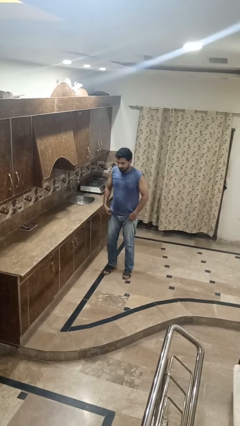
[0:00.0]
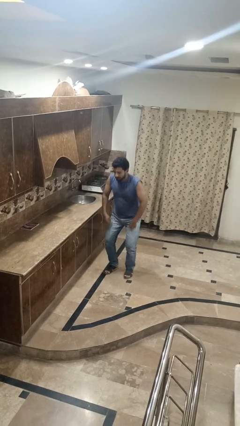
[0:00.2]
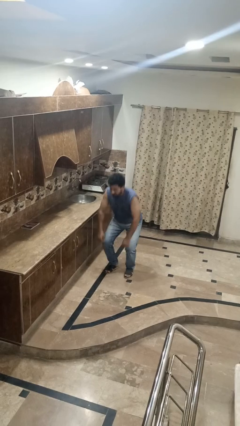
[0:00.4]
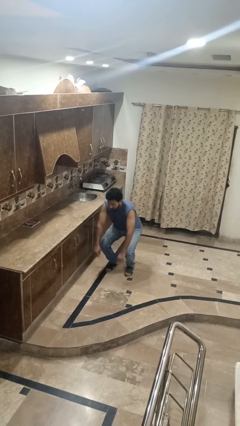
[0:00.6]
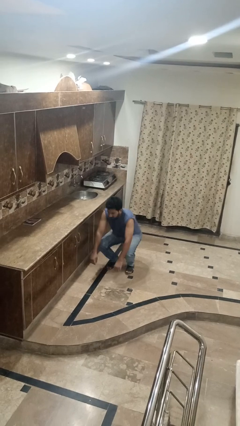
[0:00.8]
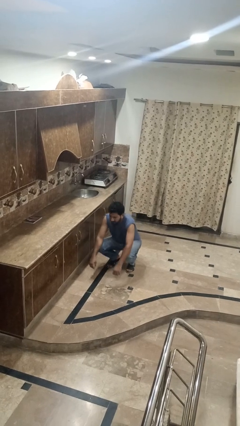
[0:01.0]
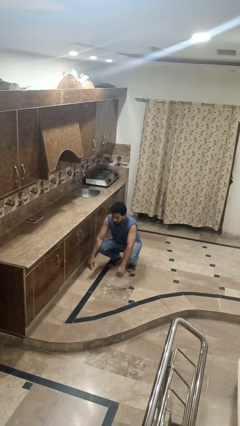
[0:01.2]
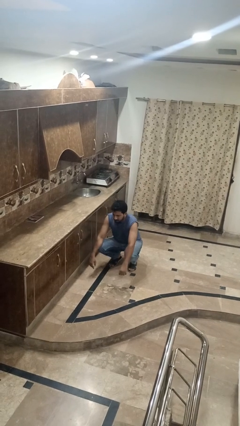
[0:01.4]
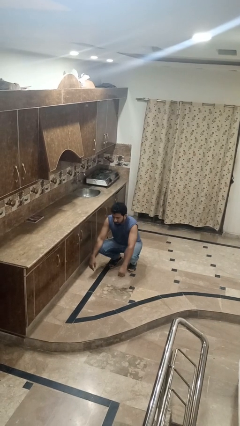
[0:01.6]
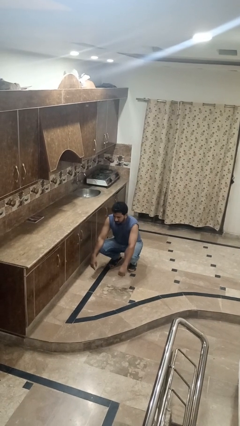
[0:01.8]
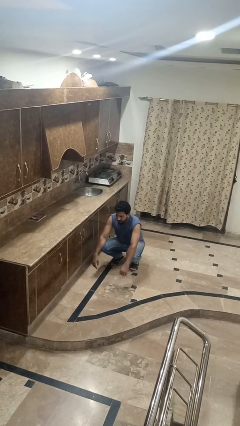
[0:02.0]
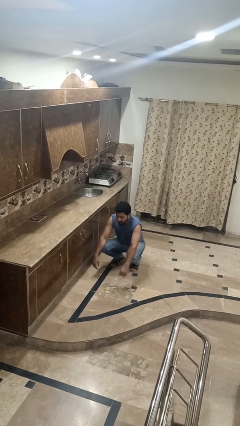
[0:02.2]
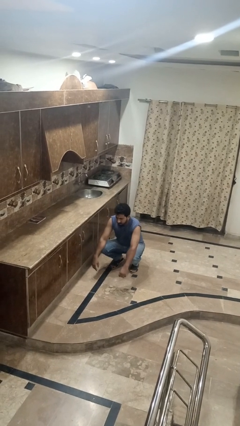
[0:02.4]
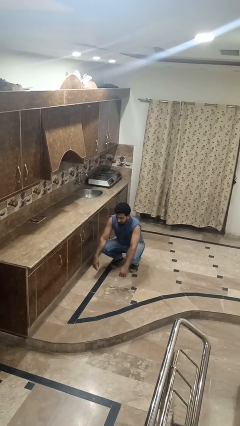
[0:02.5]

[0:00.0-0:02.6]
person squats

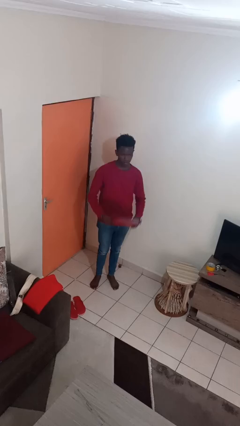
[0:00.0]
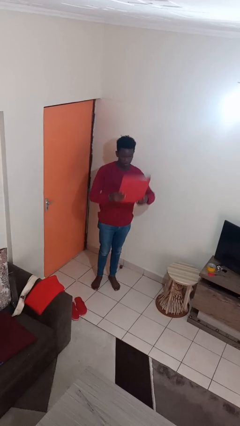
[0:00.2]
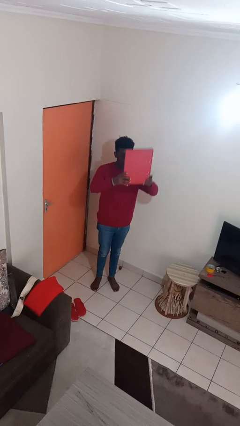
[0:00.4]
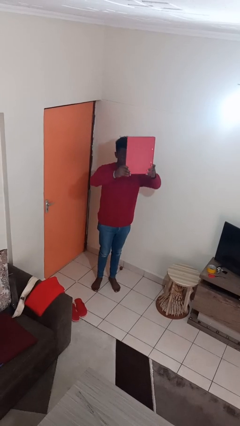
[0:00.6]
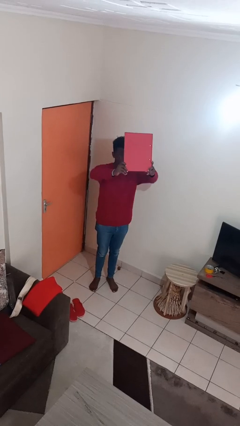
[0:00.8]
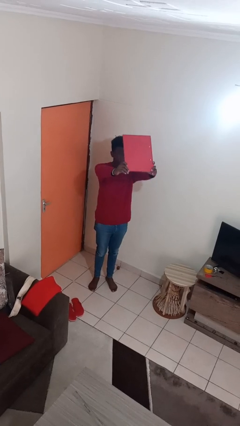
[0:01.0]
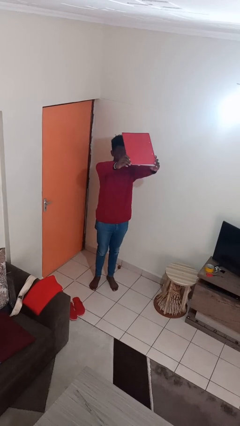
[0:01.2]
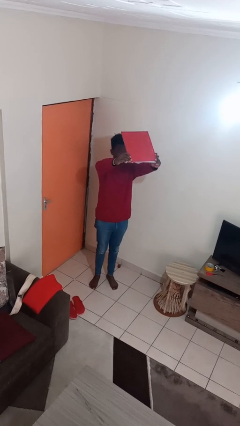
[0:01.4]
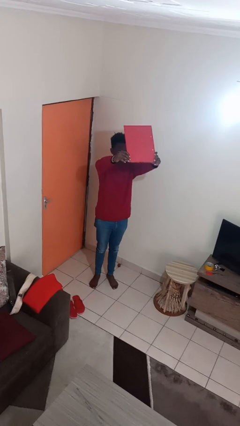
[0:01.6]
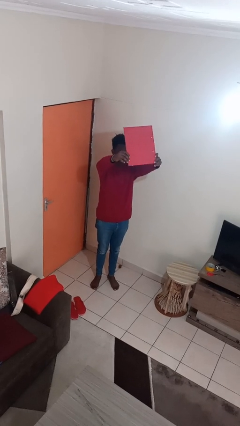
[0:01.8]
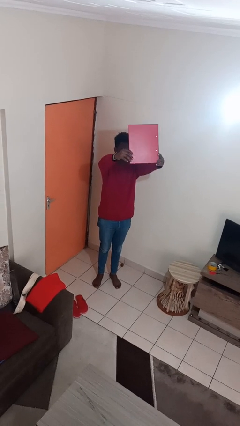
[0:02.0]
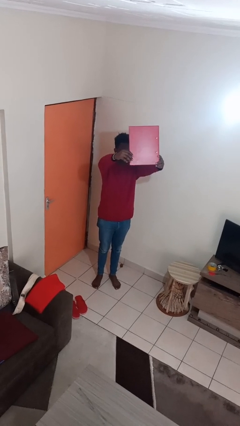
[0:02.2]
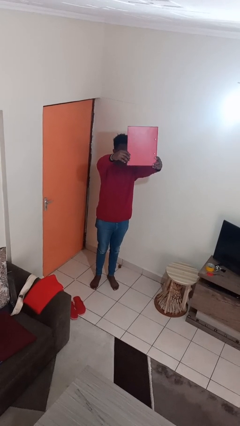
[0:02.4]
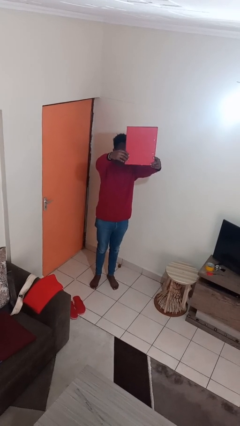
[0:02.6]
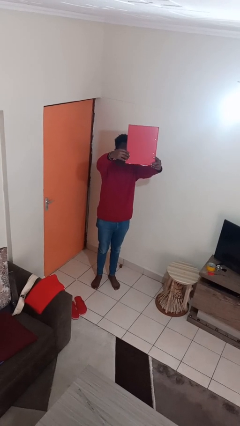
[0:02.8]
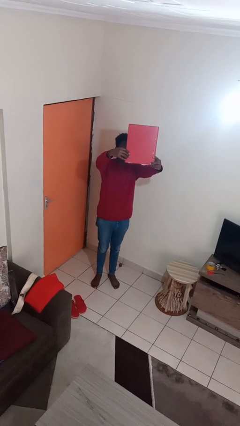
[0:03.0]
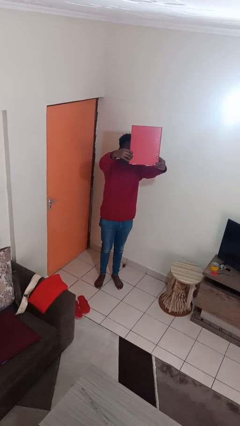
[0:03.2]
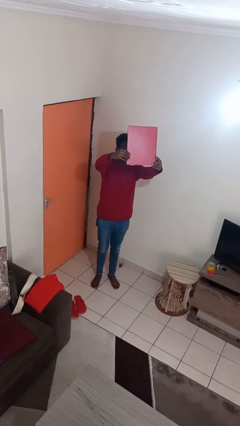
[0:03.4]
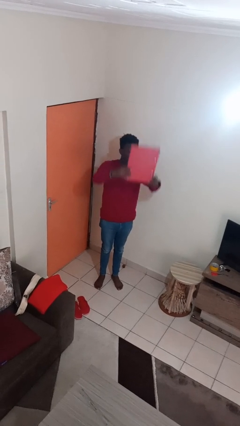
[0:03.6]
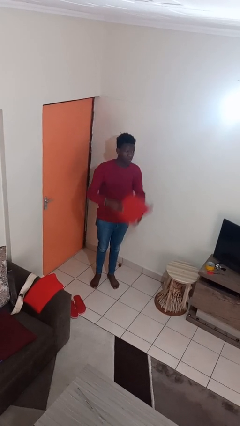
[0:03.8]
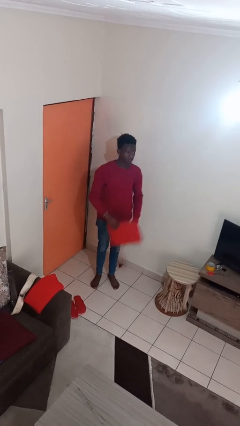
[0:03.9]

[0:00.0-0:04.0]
person holds object above head

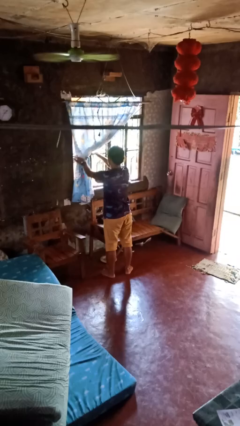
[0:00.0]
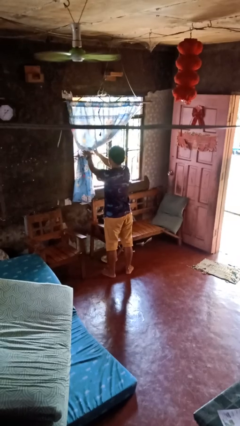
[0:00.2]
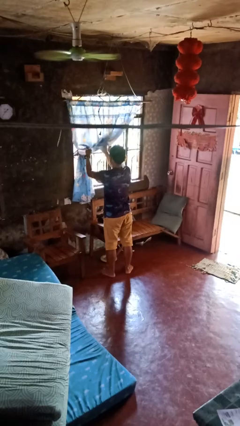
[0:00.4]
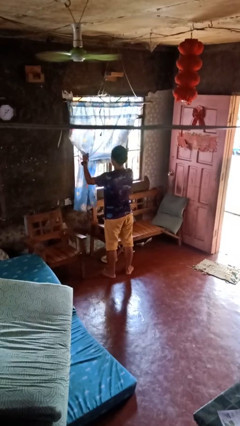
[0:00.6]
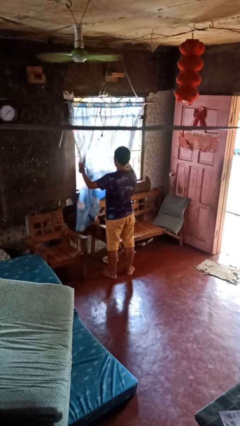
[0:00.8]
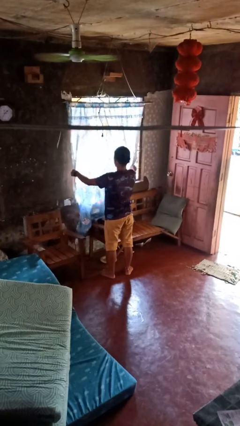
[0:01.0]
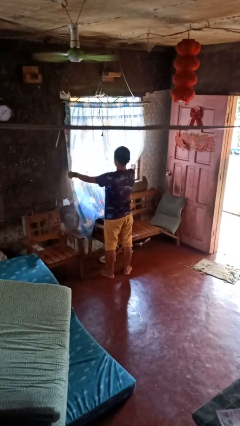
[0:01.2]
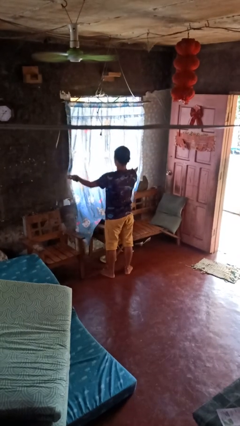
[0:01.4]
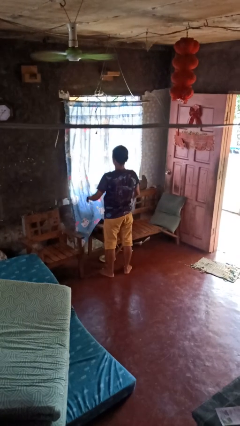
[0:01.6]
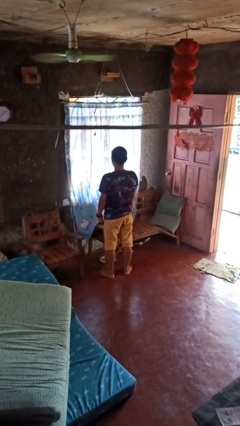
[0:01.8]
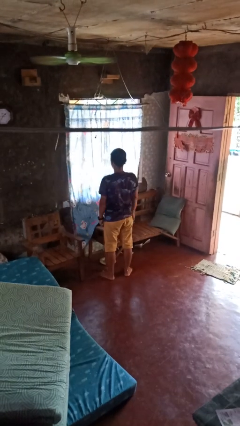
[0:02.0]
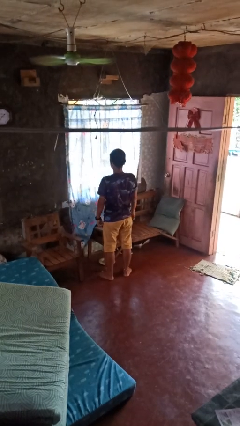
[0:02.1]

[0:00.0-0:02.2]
person closes curtains

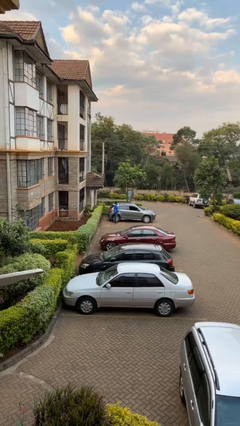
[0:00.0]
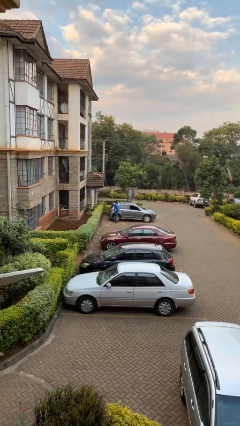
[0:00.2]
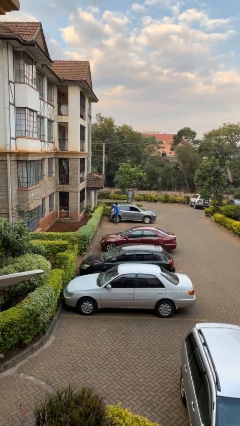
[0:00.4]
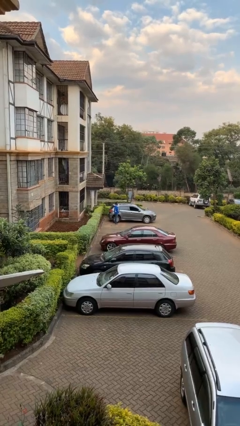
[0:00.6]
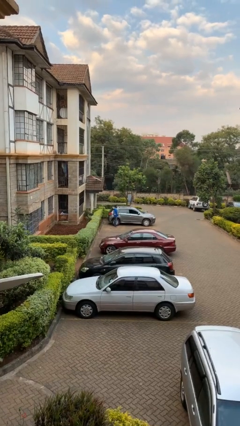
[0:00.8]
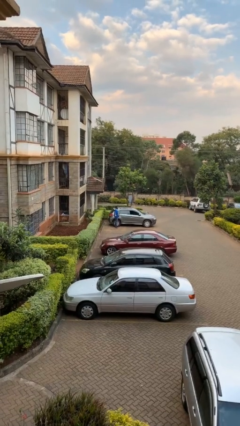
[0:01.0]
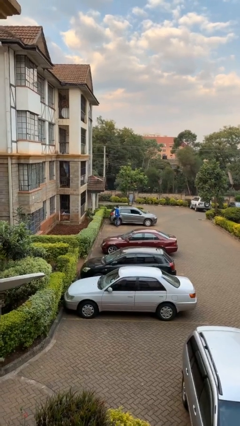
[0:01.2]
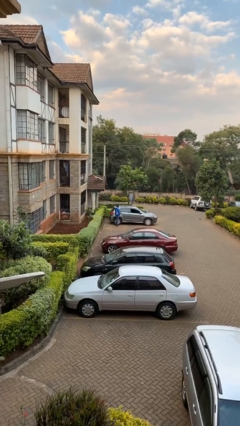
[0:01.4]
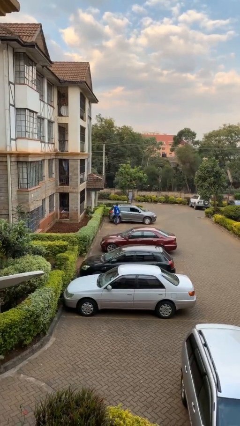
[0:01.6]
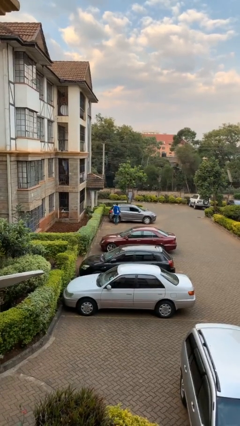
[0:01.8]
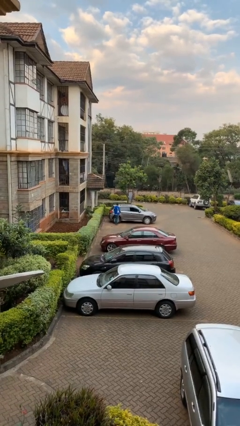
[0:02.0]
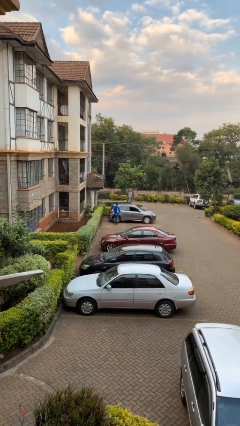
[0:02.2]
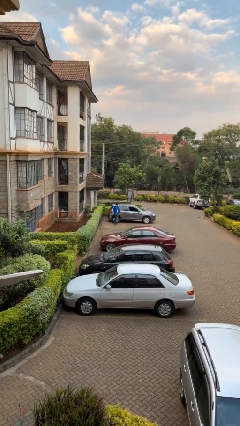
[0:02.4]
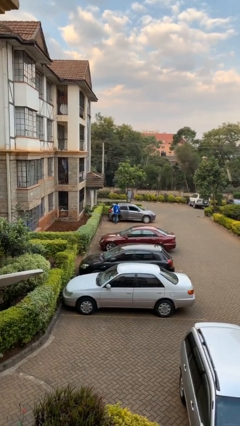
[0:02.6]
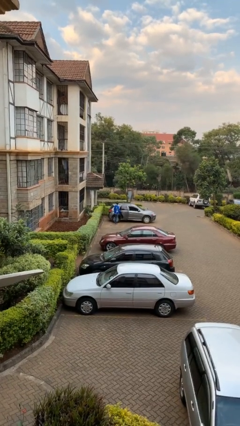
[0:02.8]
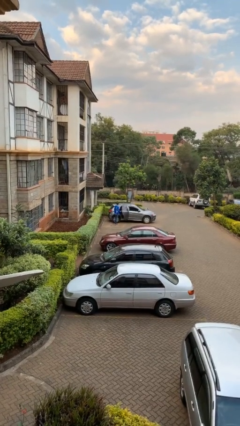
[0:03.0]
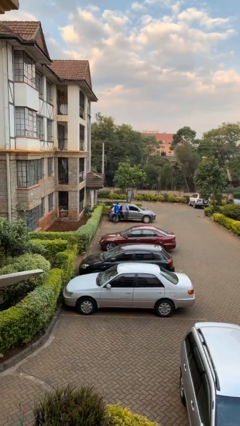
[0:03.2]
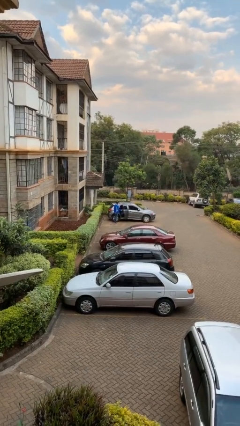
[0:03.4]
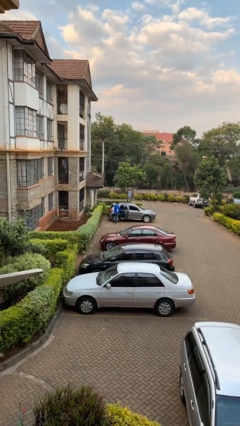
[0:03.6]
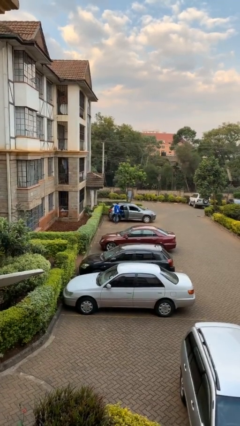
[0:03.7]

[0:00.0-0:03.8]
person opens car door

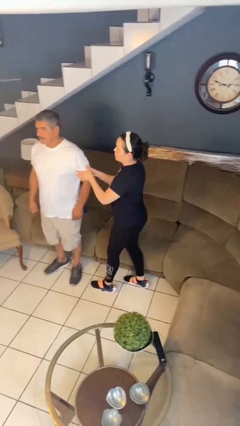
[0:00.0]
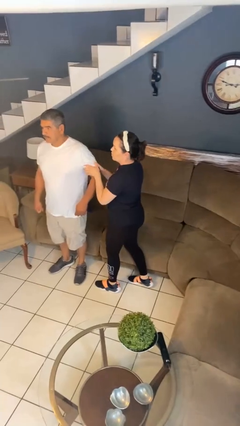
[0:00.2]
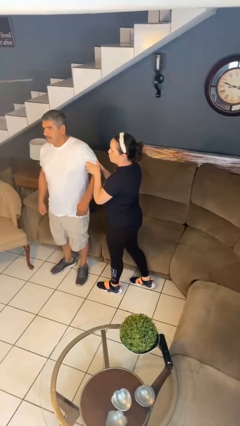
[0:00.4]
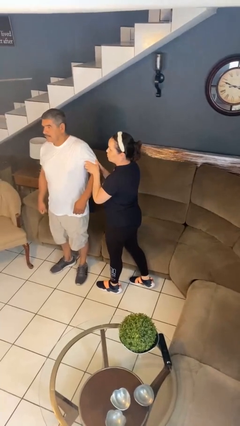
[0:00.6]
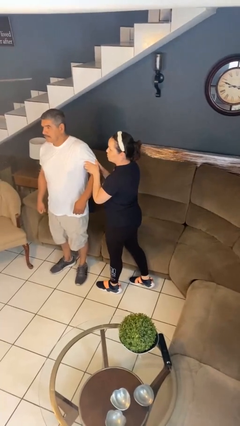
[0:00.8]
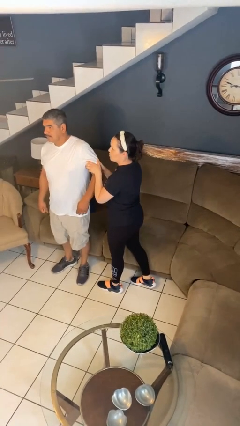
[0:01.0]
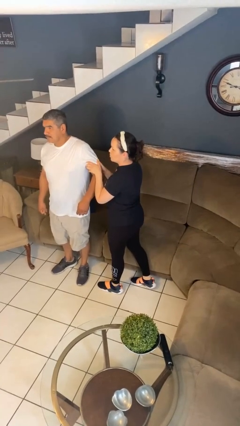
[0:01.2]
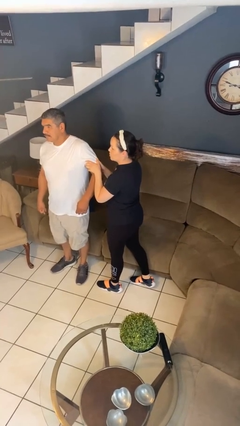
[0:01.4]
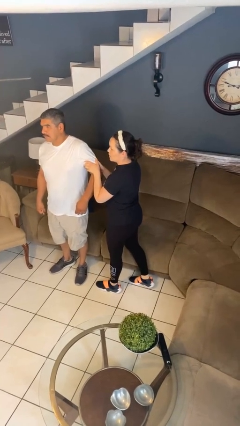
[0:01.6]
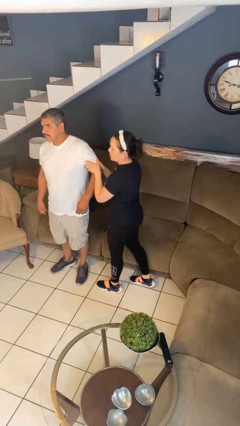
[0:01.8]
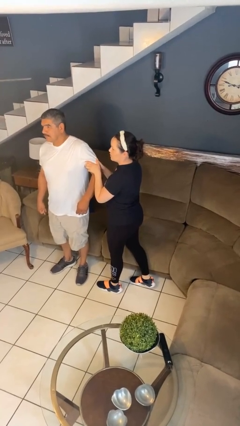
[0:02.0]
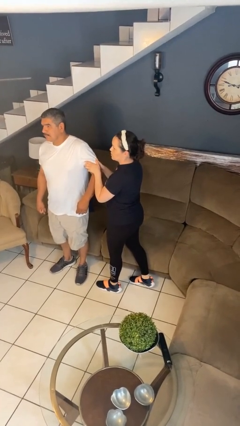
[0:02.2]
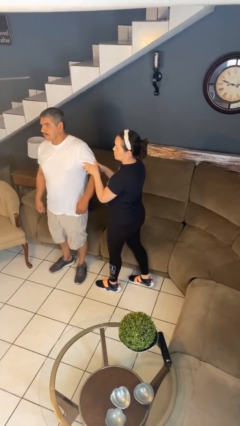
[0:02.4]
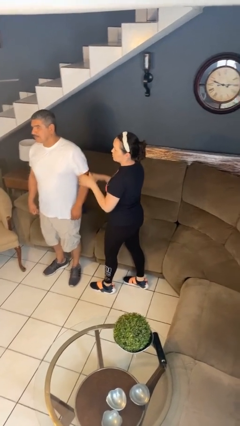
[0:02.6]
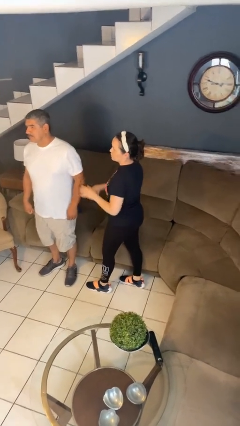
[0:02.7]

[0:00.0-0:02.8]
person grabs person by bicep

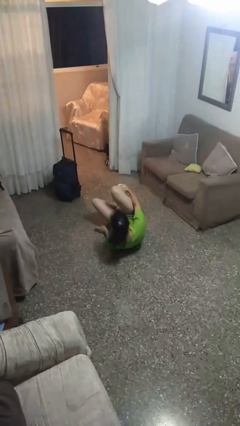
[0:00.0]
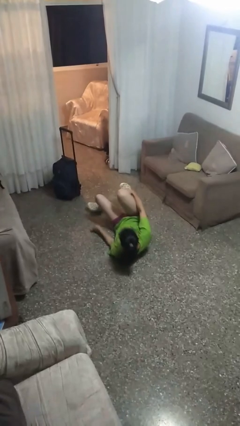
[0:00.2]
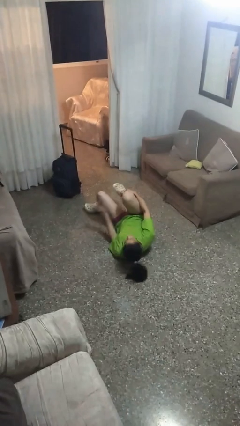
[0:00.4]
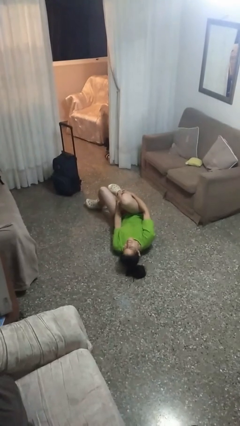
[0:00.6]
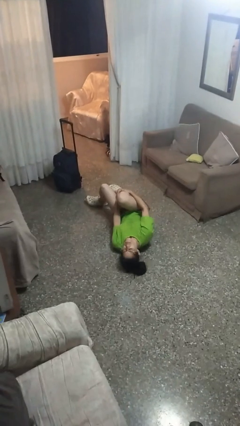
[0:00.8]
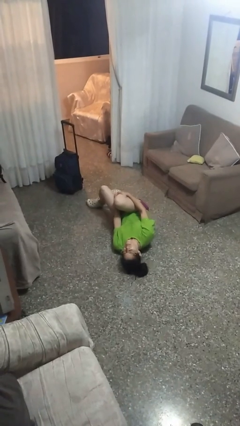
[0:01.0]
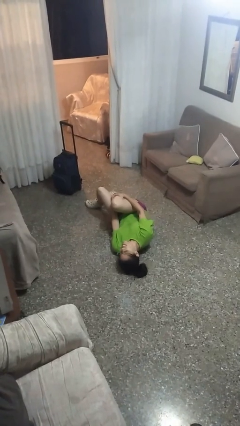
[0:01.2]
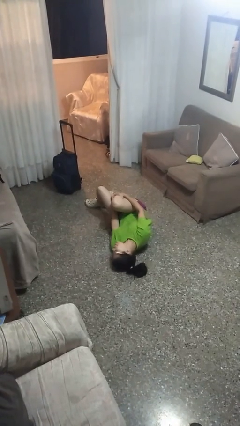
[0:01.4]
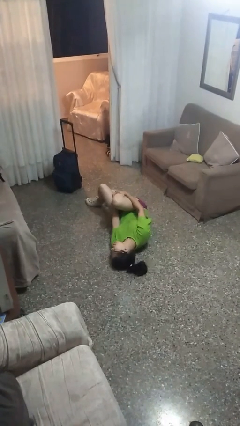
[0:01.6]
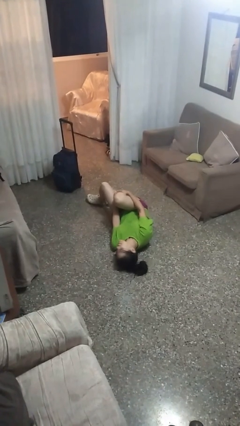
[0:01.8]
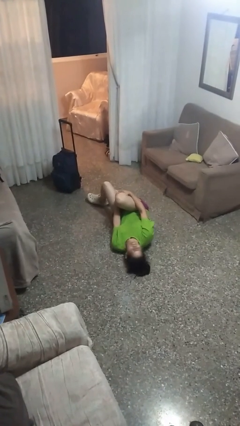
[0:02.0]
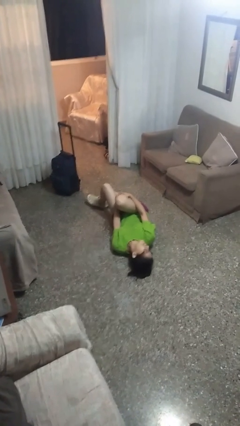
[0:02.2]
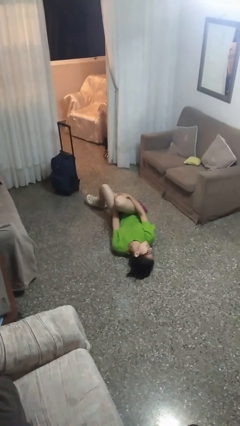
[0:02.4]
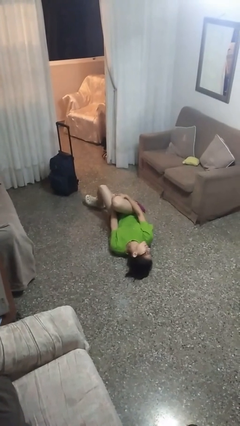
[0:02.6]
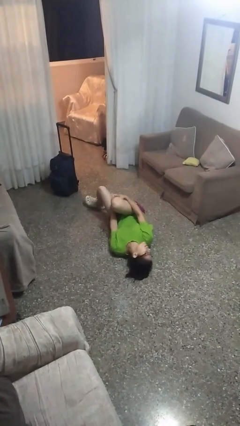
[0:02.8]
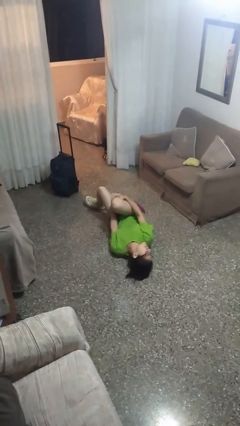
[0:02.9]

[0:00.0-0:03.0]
person lies down on floor
